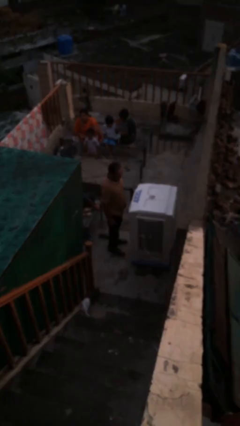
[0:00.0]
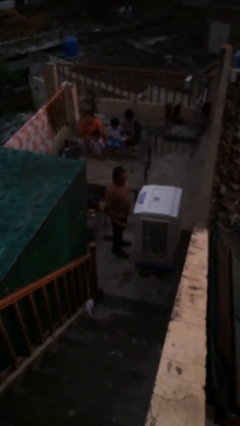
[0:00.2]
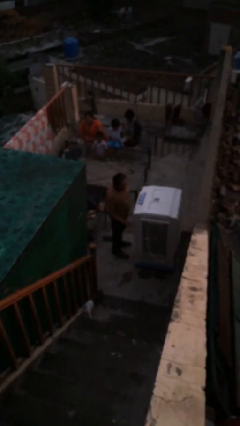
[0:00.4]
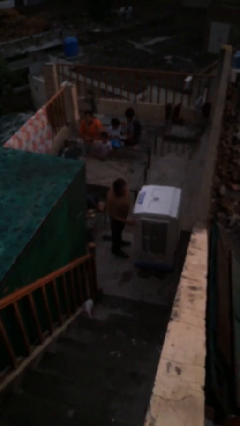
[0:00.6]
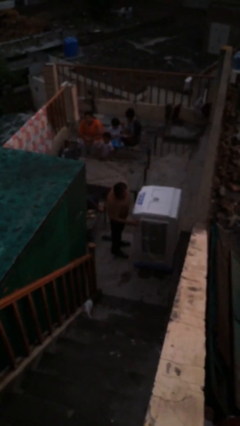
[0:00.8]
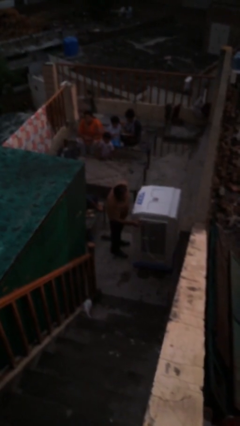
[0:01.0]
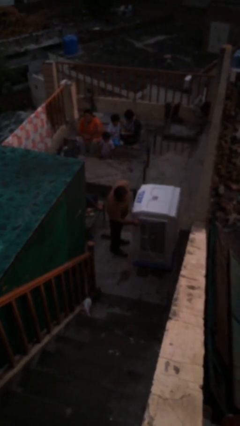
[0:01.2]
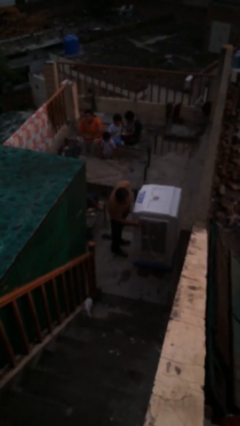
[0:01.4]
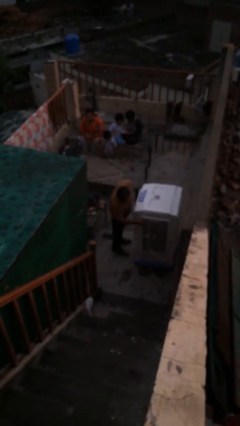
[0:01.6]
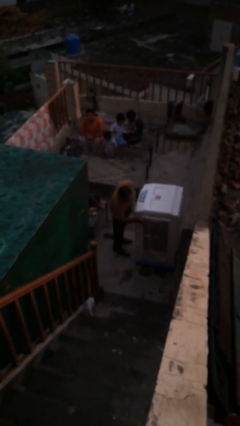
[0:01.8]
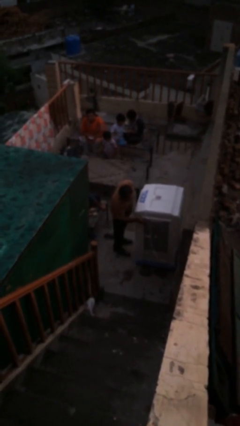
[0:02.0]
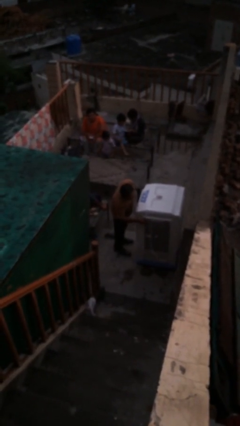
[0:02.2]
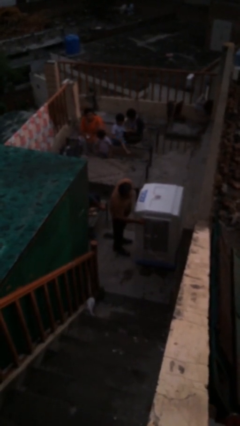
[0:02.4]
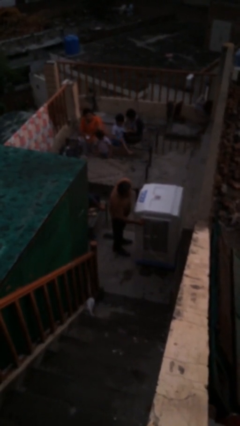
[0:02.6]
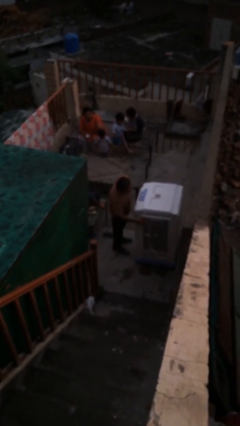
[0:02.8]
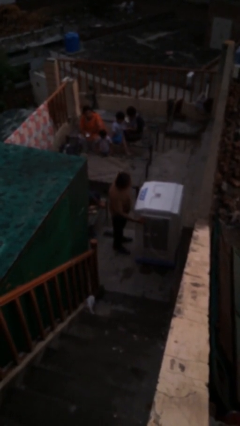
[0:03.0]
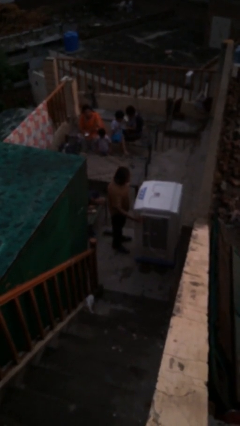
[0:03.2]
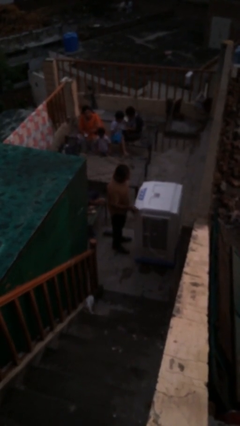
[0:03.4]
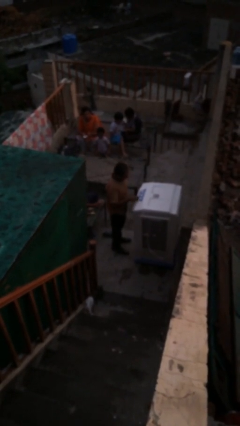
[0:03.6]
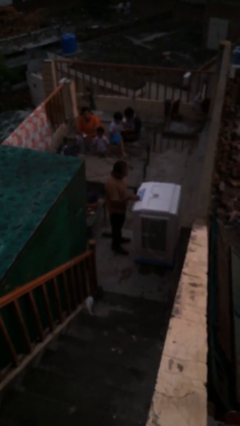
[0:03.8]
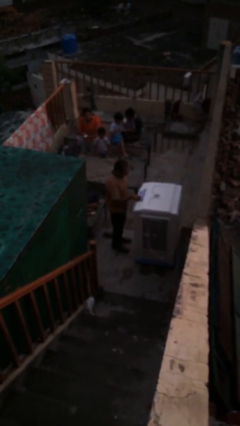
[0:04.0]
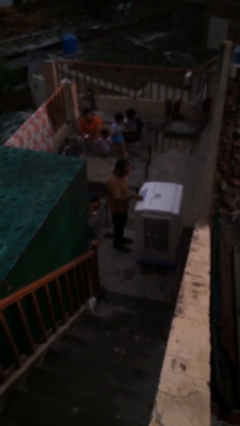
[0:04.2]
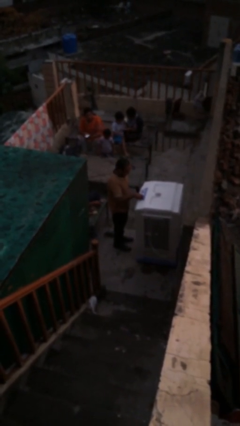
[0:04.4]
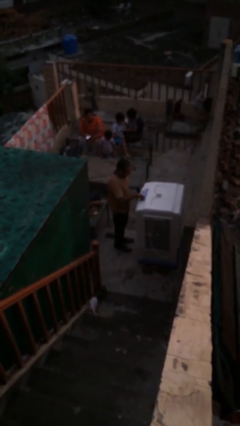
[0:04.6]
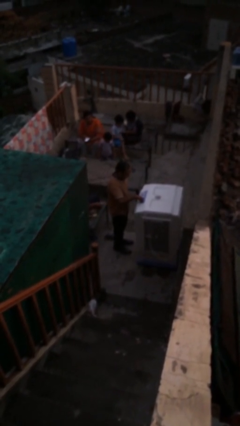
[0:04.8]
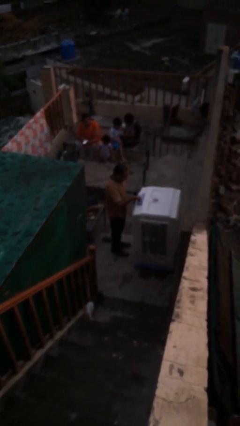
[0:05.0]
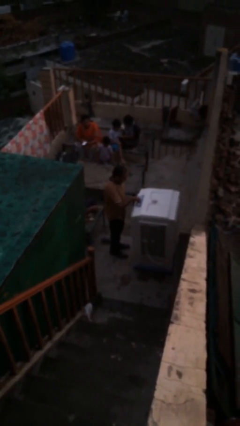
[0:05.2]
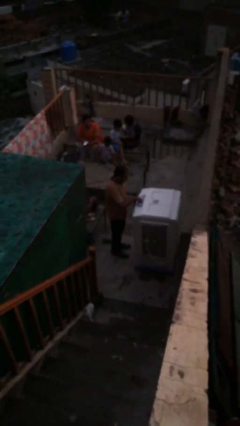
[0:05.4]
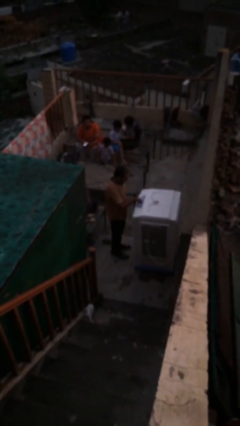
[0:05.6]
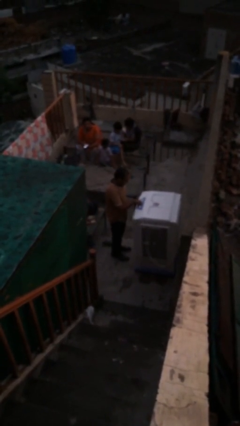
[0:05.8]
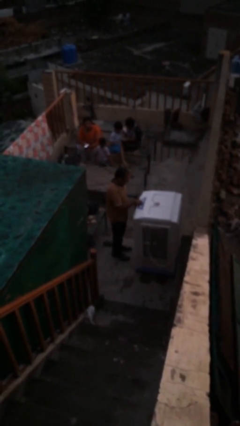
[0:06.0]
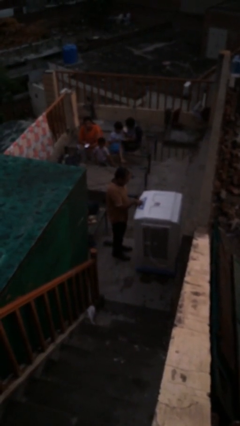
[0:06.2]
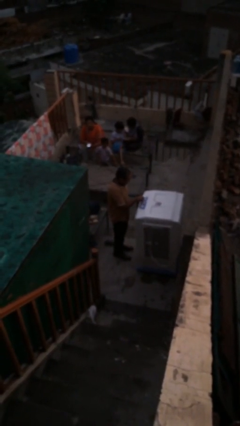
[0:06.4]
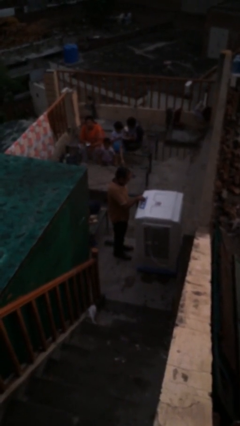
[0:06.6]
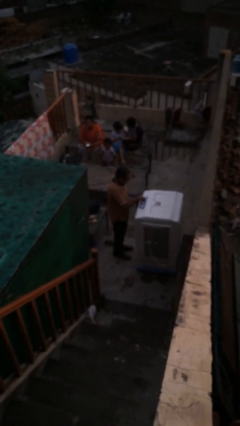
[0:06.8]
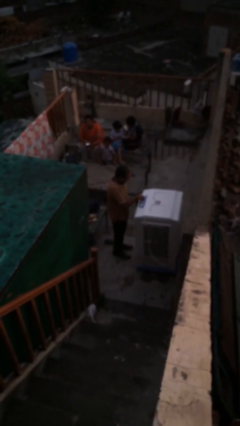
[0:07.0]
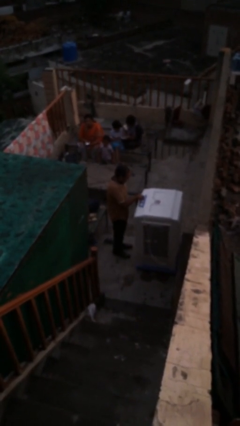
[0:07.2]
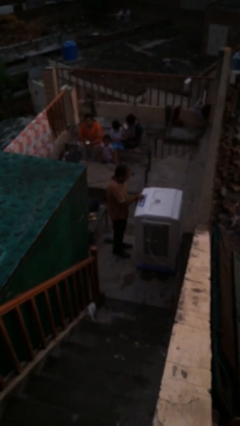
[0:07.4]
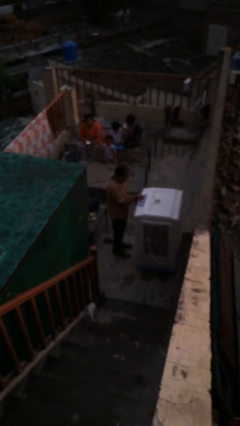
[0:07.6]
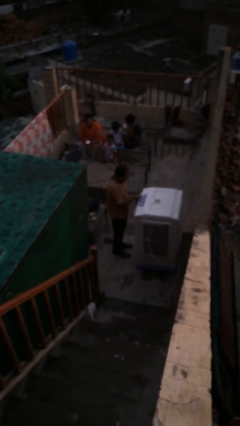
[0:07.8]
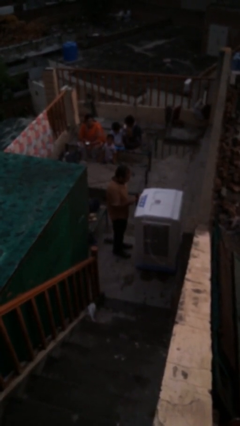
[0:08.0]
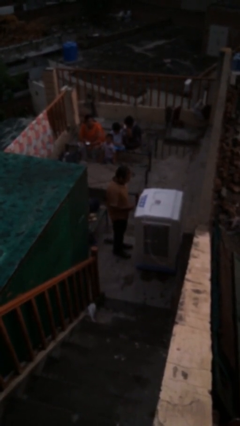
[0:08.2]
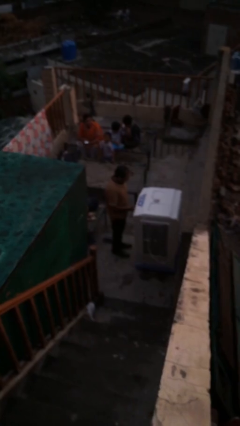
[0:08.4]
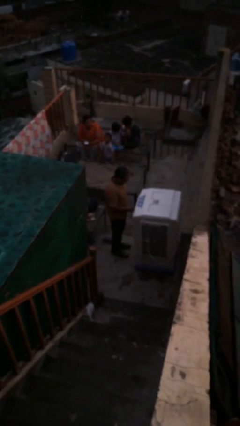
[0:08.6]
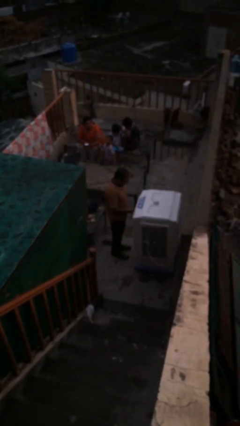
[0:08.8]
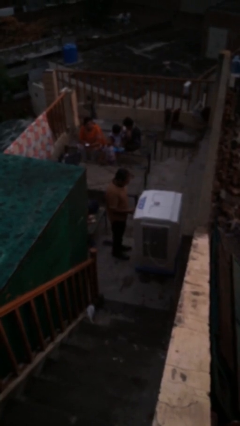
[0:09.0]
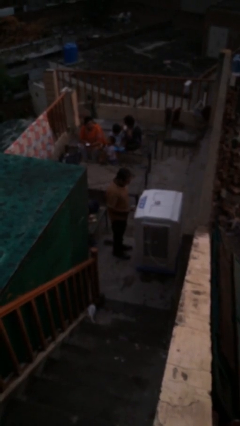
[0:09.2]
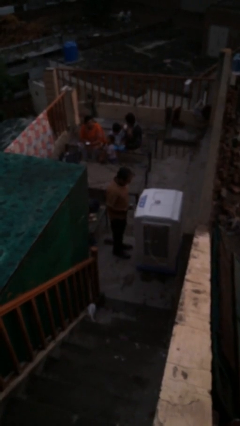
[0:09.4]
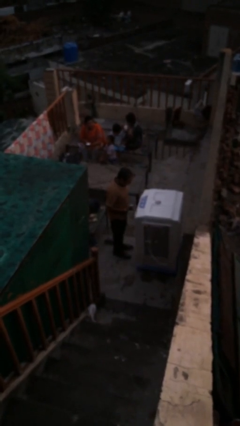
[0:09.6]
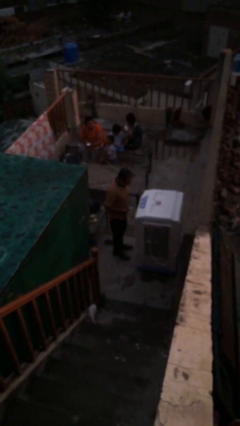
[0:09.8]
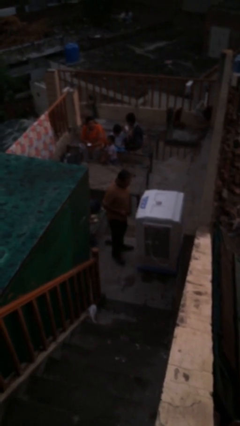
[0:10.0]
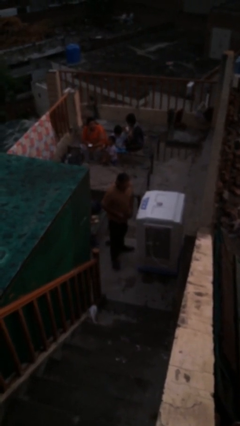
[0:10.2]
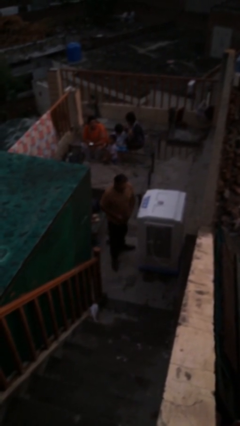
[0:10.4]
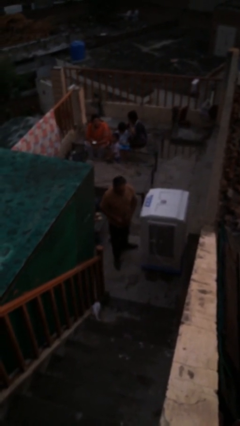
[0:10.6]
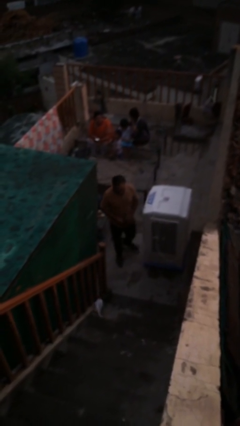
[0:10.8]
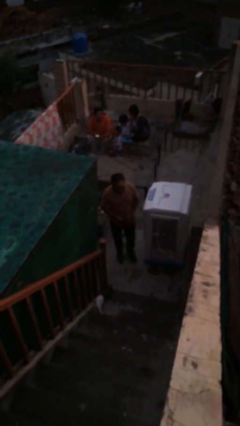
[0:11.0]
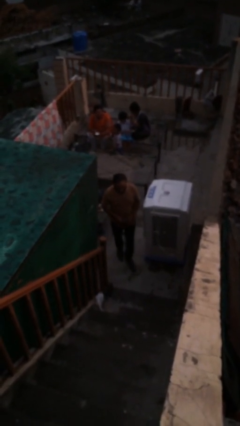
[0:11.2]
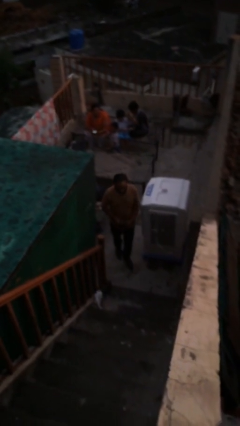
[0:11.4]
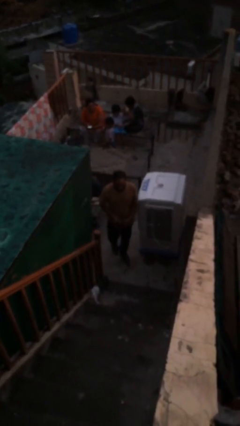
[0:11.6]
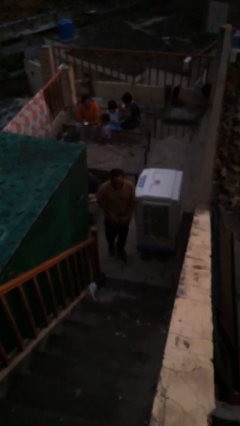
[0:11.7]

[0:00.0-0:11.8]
person purchases from machine

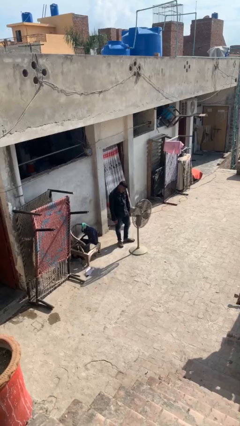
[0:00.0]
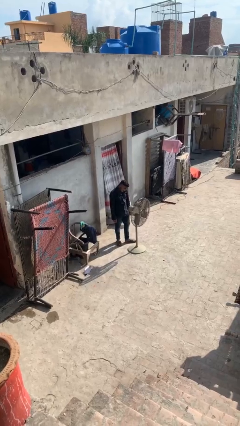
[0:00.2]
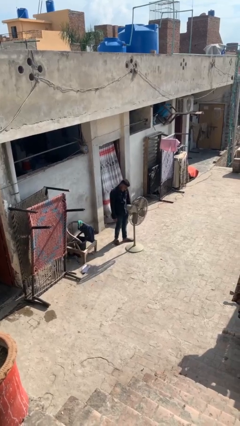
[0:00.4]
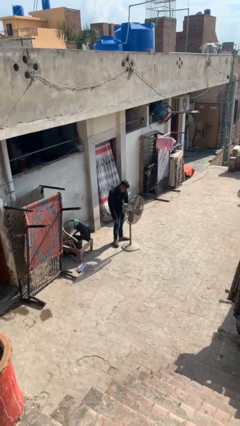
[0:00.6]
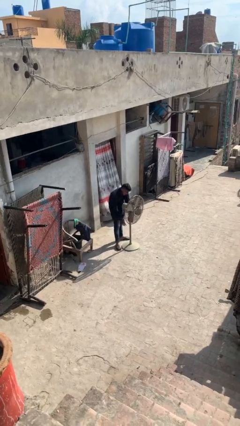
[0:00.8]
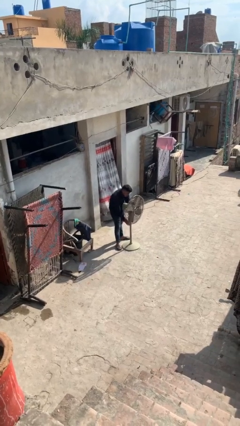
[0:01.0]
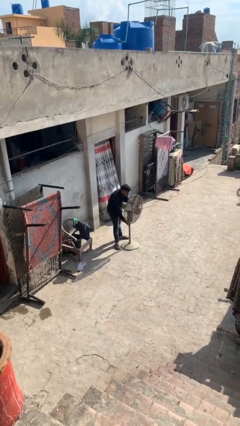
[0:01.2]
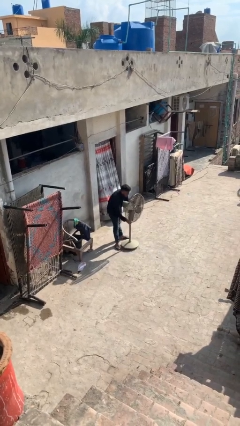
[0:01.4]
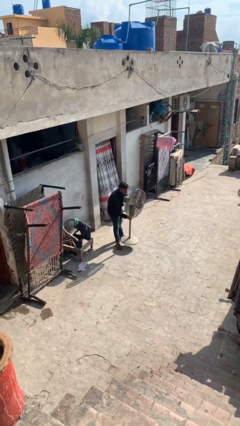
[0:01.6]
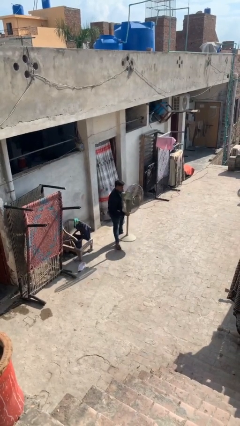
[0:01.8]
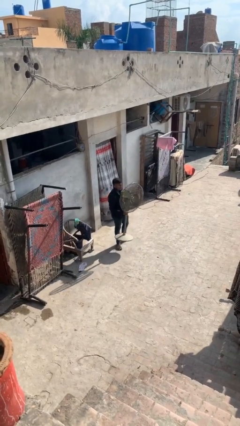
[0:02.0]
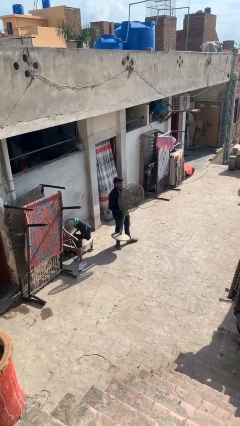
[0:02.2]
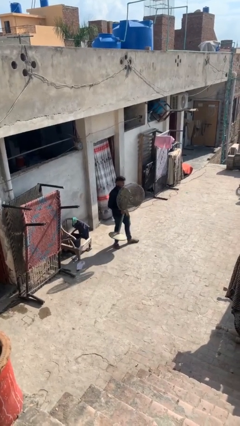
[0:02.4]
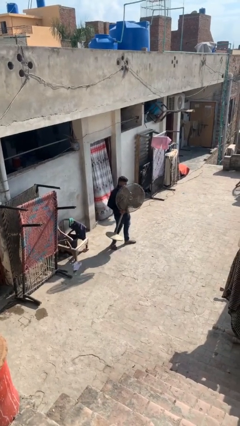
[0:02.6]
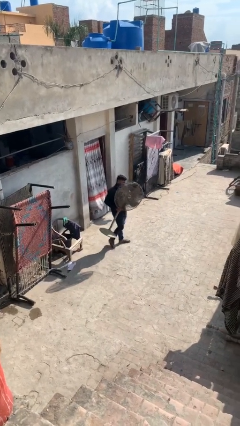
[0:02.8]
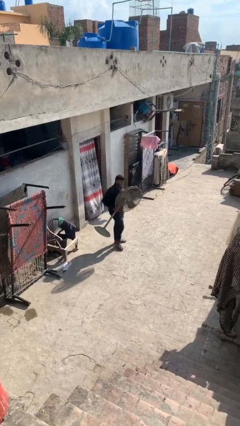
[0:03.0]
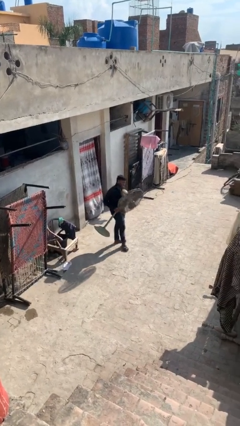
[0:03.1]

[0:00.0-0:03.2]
person picks up object from floor

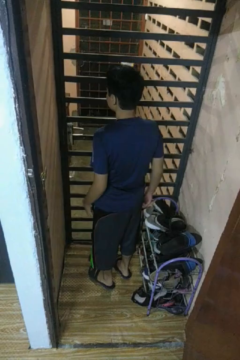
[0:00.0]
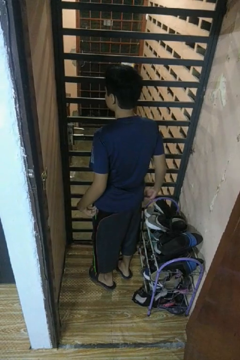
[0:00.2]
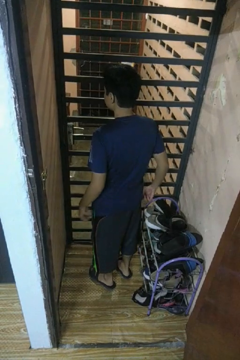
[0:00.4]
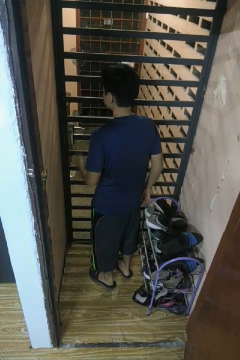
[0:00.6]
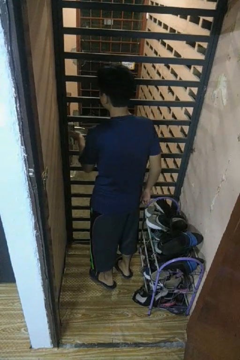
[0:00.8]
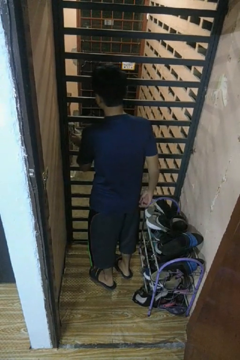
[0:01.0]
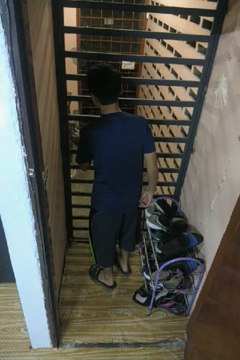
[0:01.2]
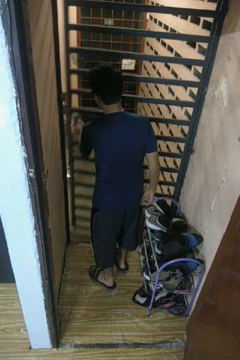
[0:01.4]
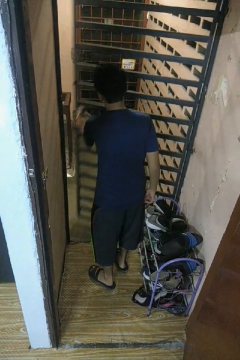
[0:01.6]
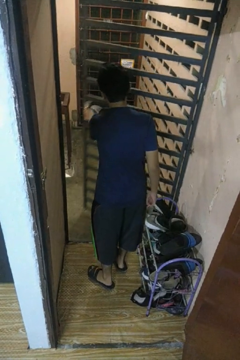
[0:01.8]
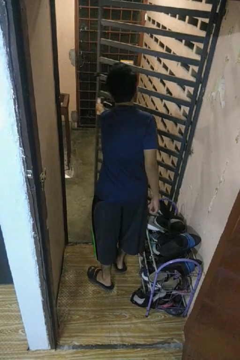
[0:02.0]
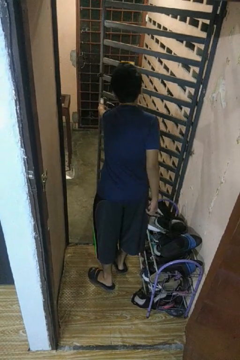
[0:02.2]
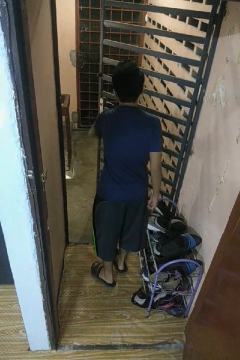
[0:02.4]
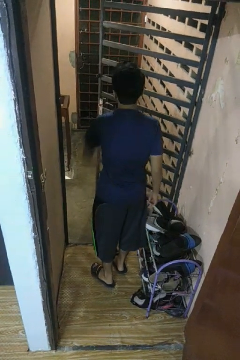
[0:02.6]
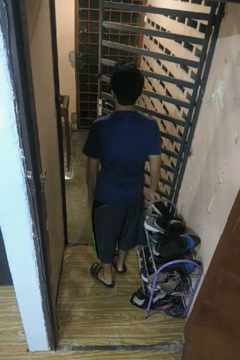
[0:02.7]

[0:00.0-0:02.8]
person opens gate

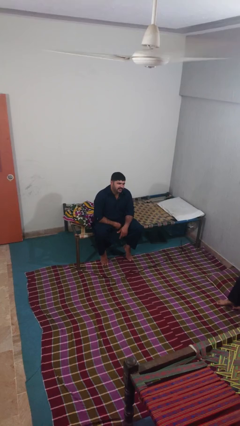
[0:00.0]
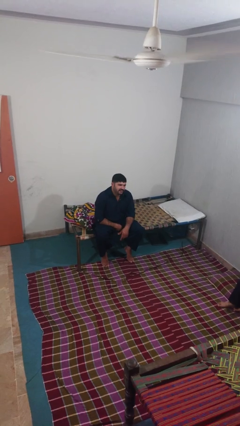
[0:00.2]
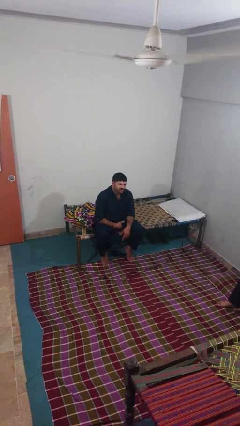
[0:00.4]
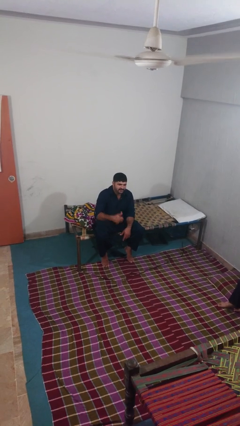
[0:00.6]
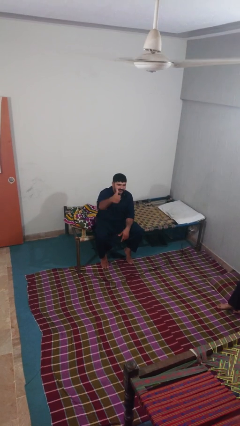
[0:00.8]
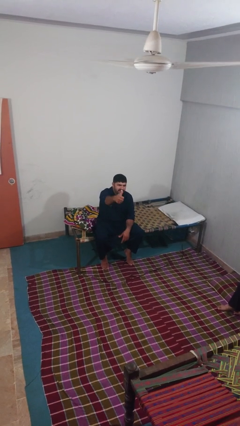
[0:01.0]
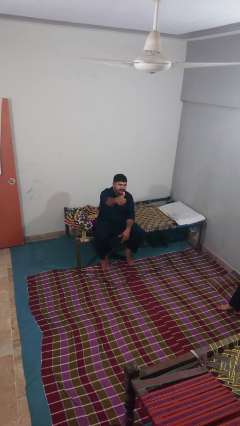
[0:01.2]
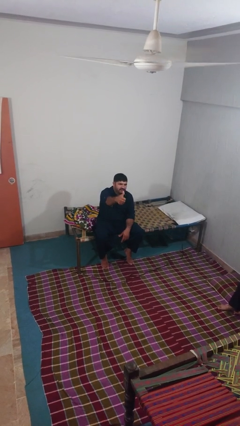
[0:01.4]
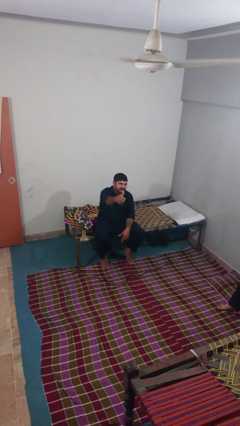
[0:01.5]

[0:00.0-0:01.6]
person gestures thumbs up
